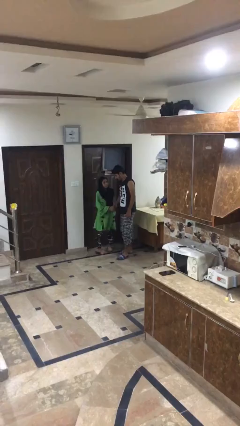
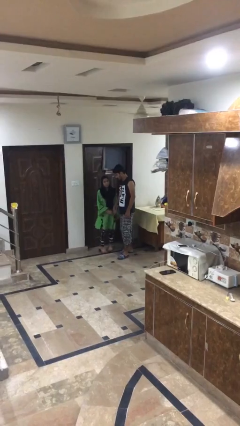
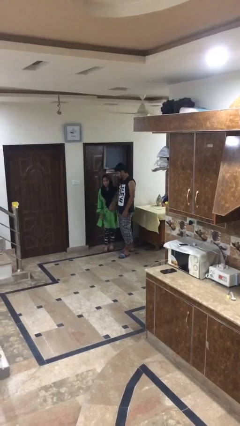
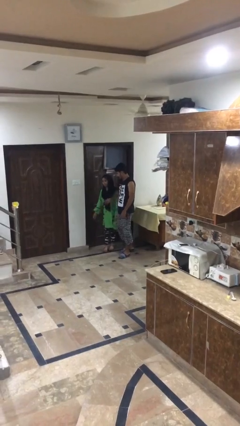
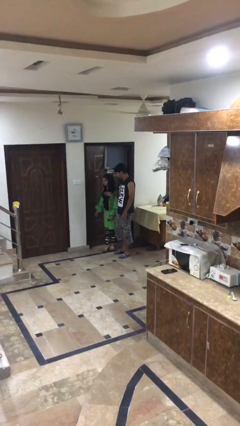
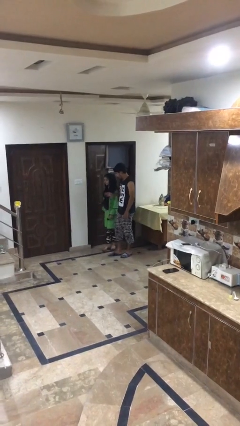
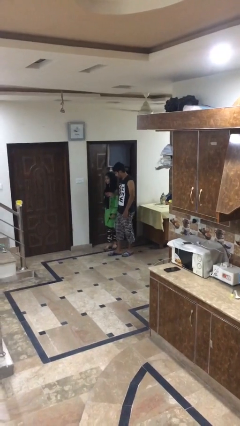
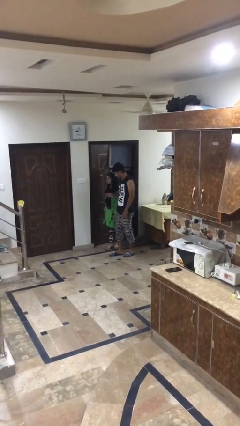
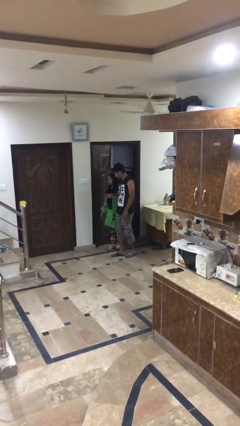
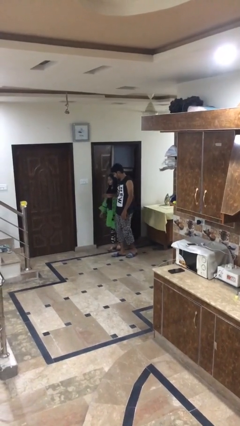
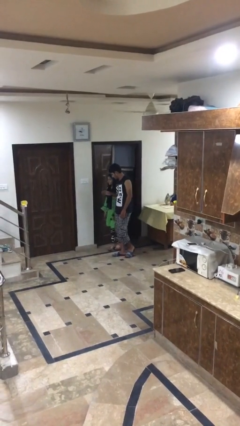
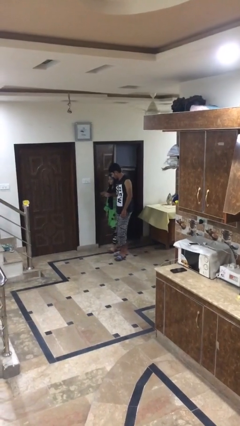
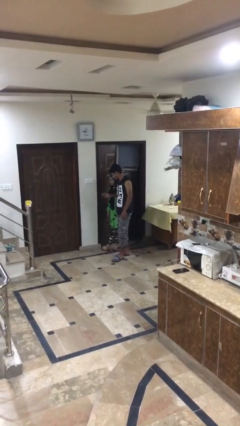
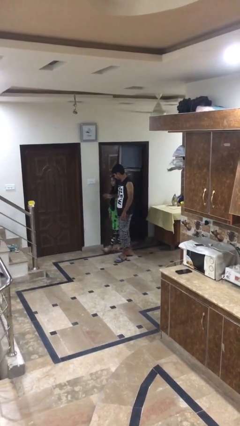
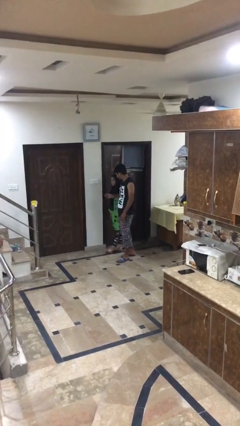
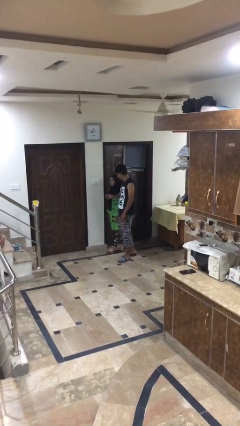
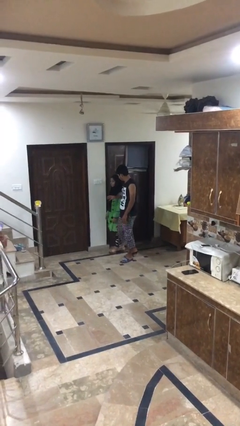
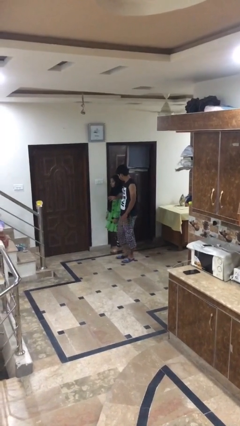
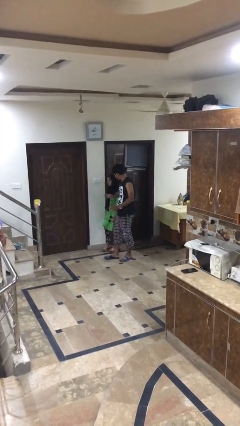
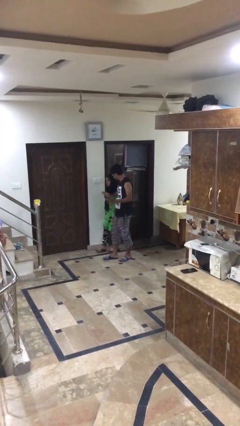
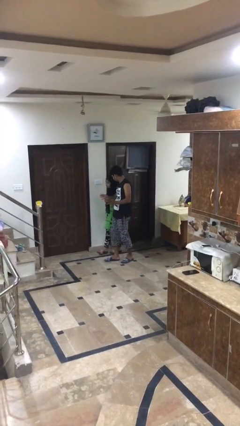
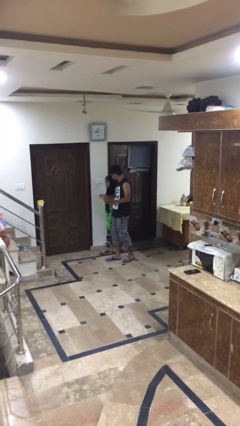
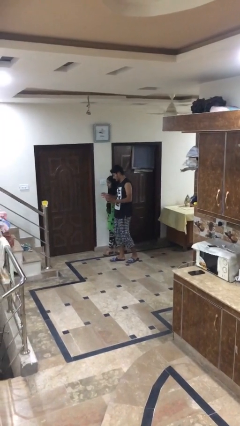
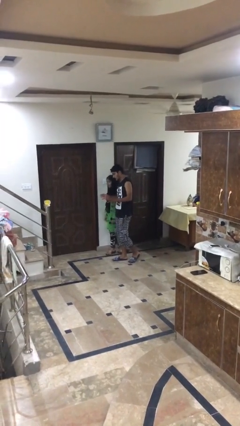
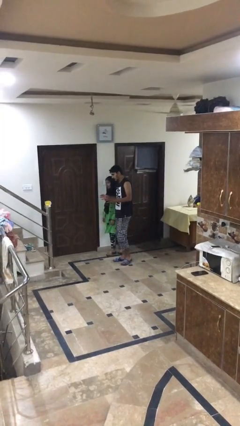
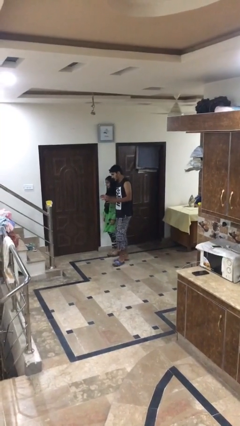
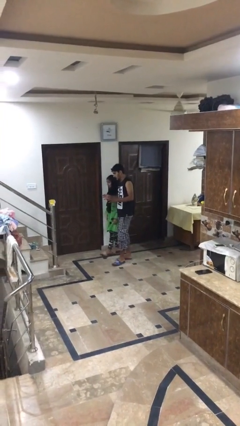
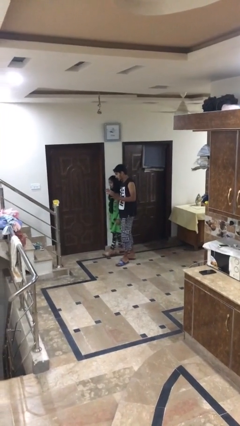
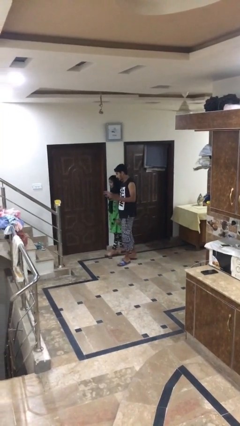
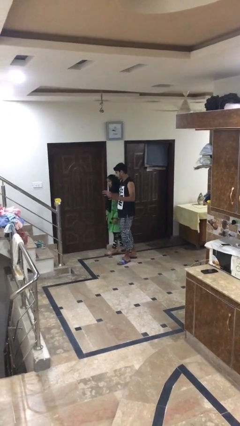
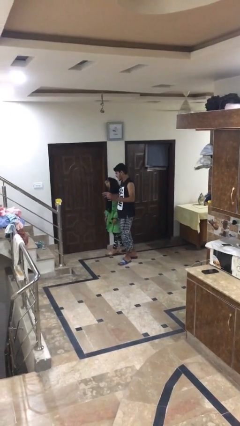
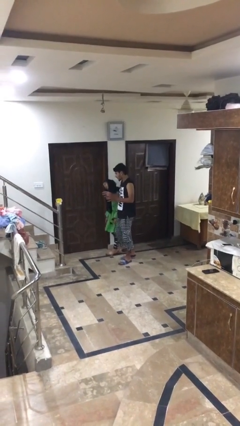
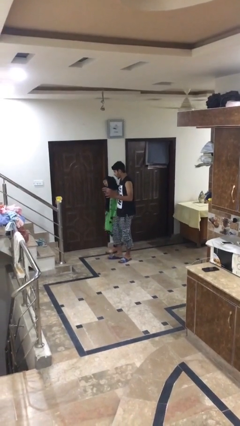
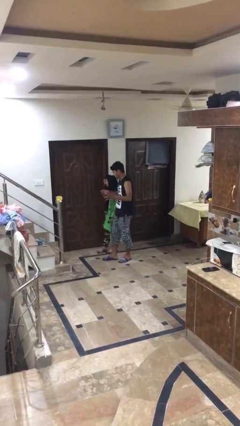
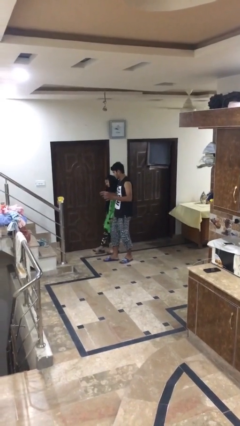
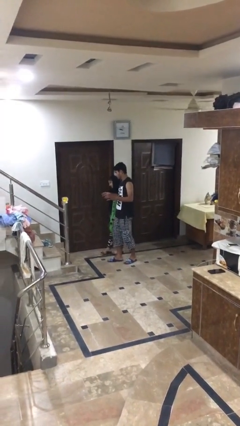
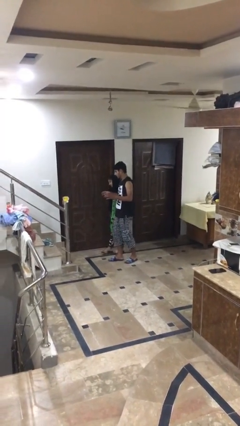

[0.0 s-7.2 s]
person talks to person

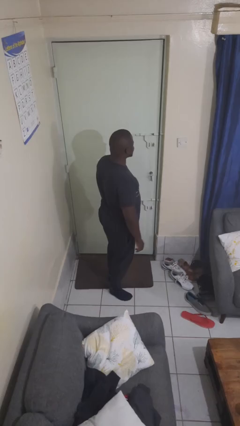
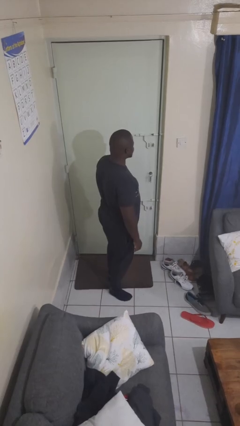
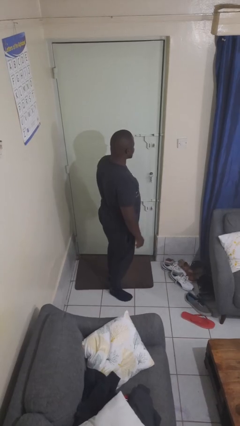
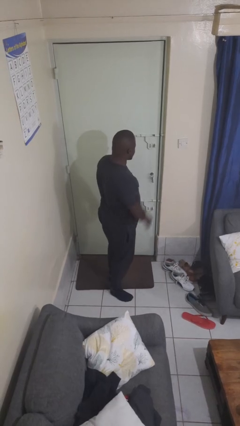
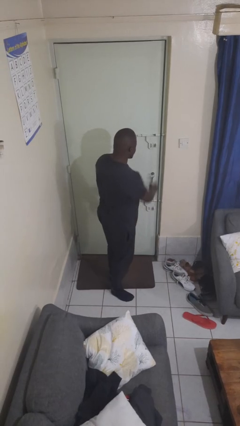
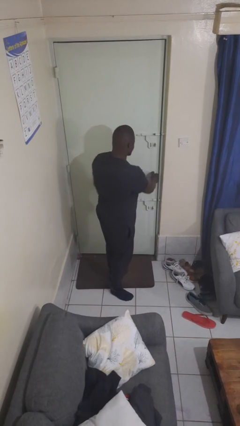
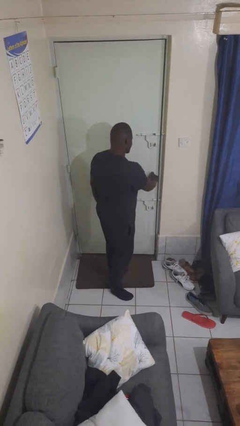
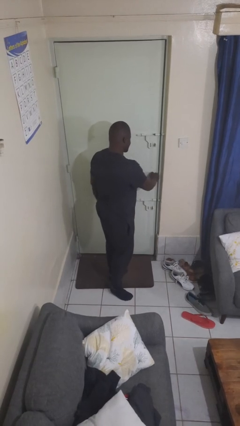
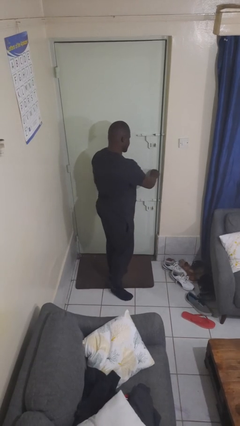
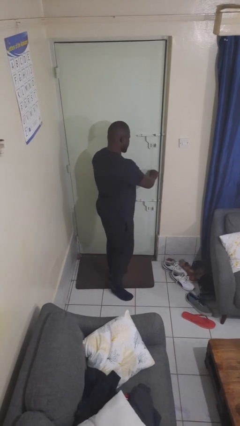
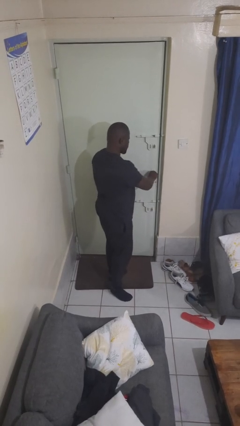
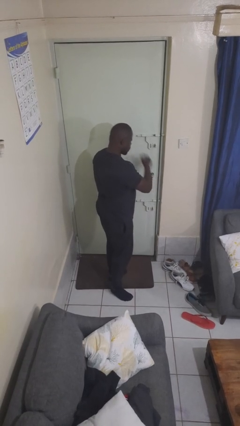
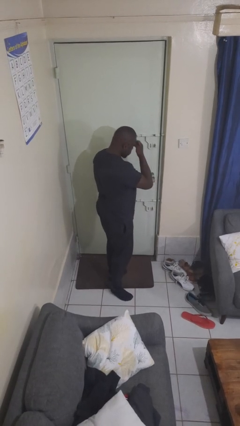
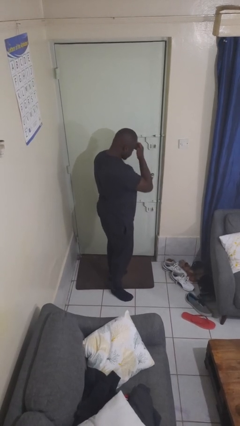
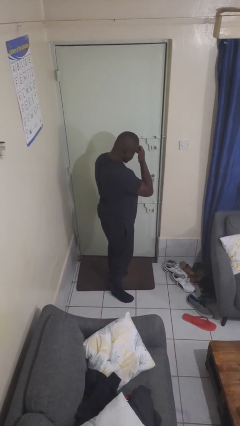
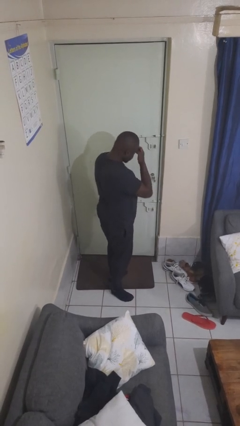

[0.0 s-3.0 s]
person unlocks door with keys

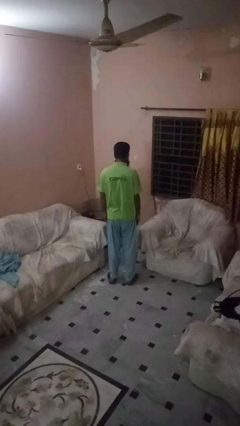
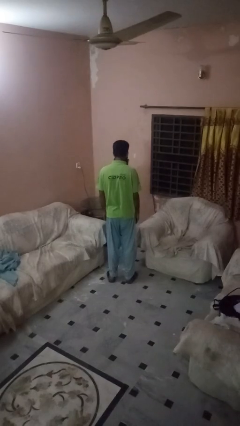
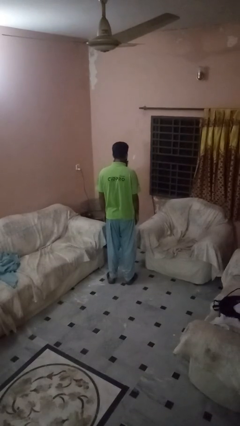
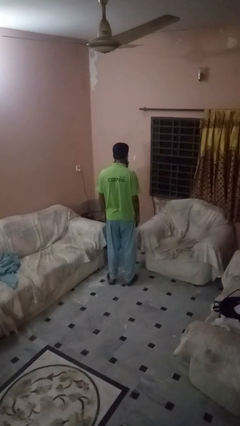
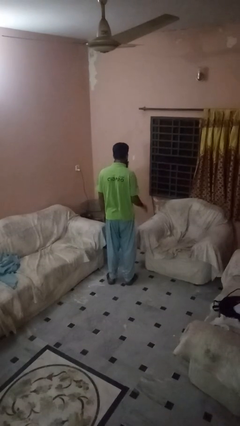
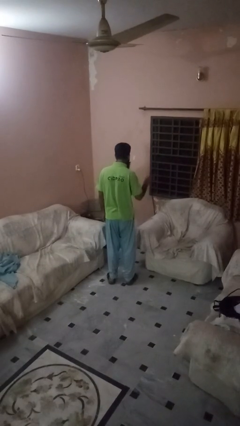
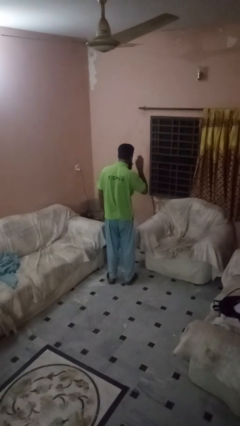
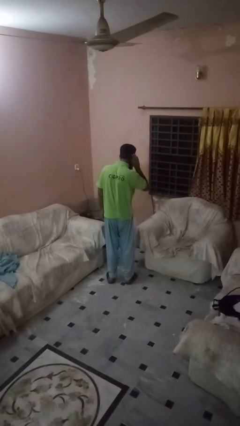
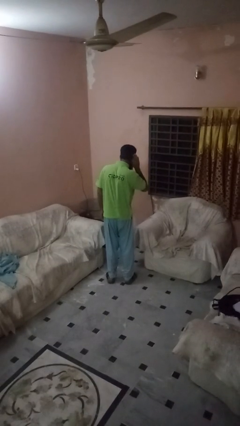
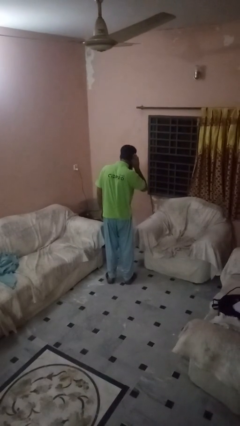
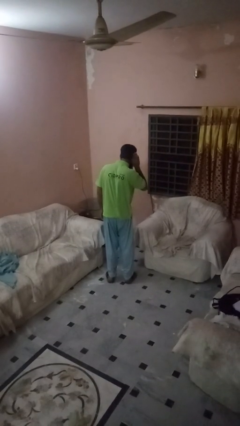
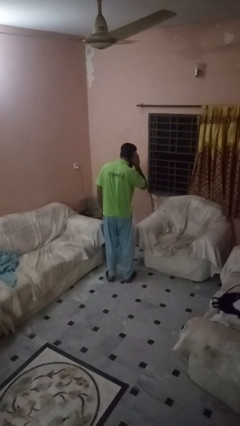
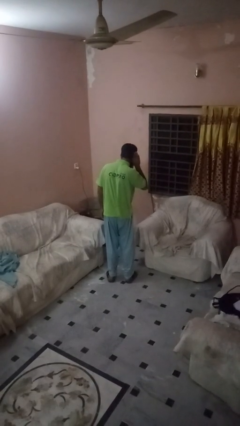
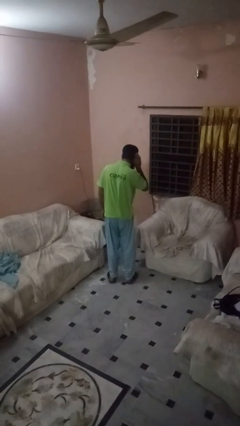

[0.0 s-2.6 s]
person gestures listen closely

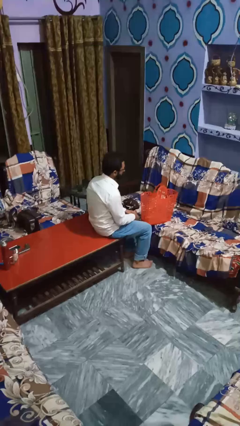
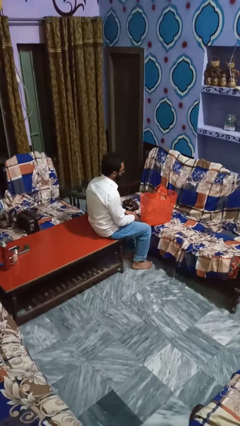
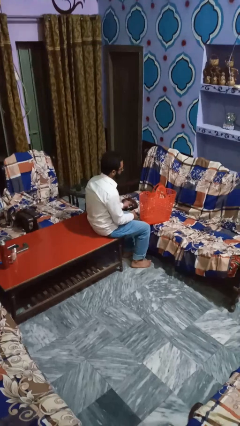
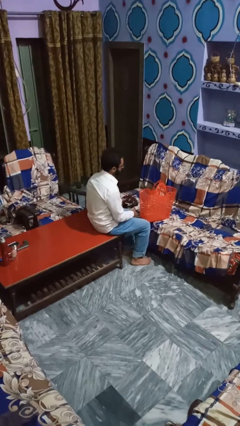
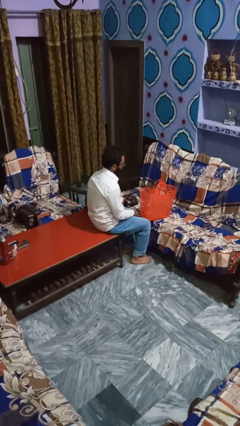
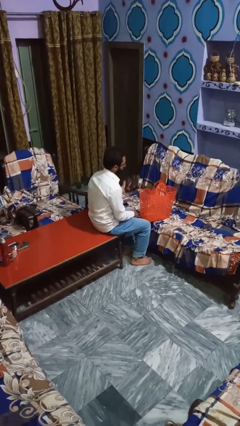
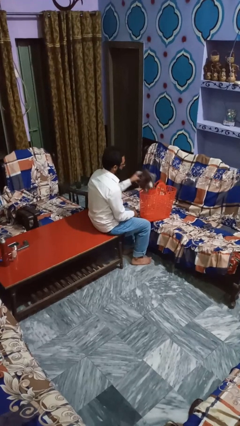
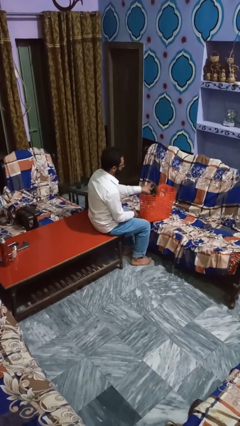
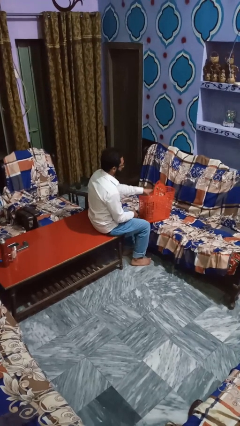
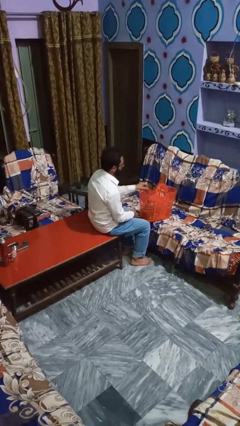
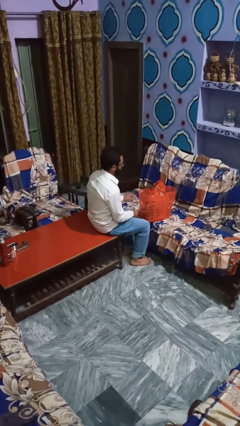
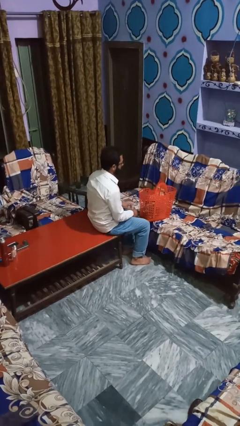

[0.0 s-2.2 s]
person discards trash

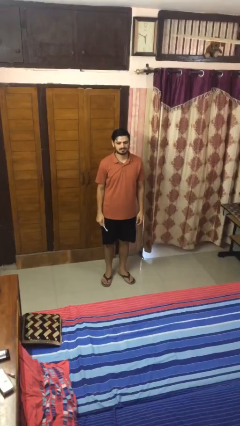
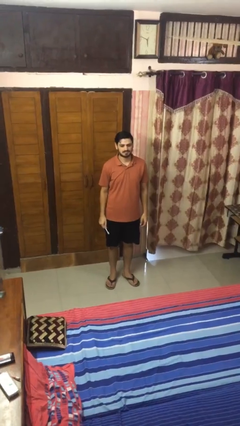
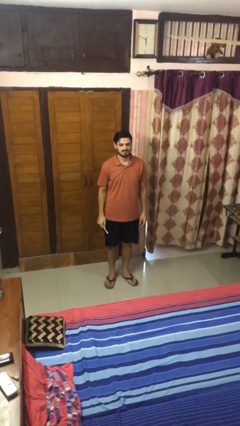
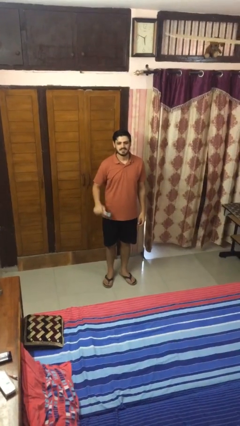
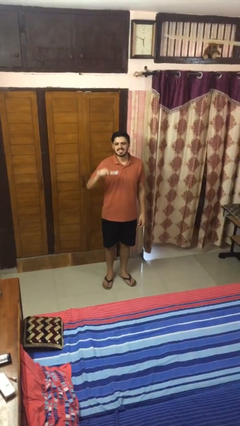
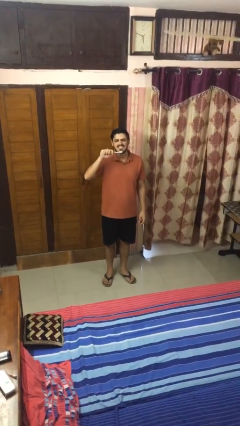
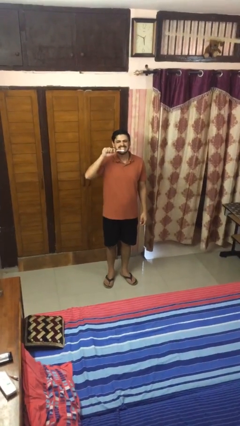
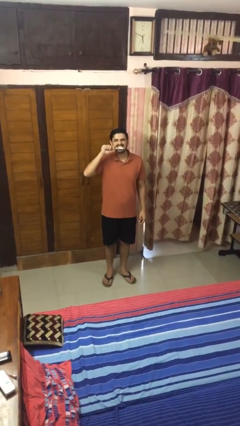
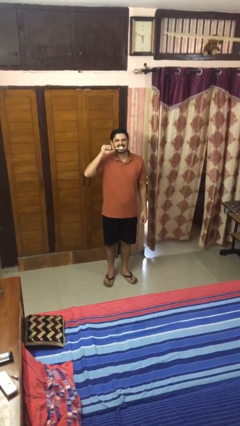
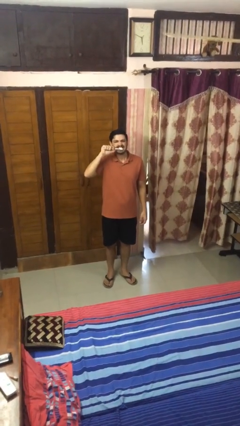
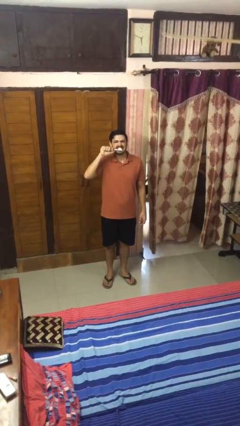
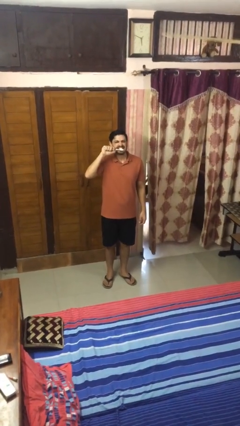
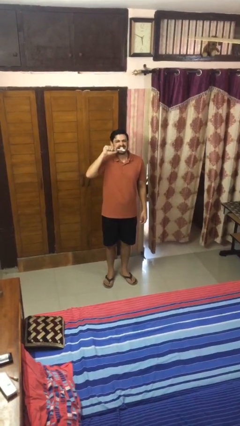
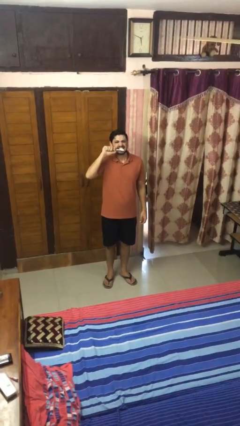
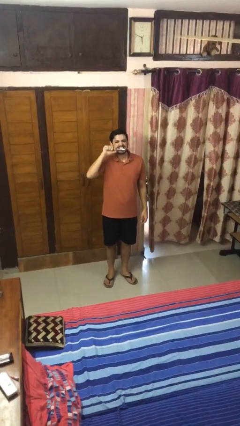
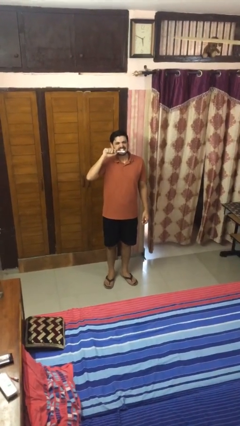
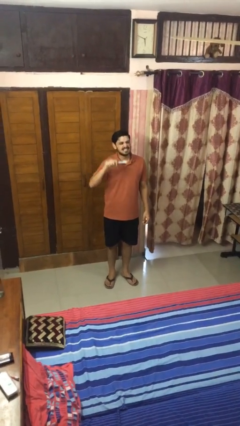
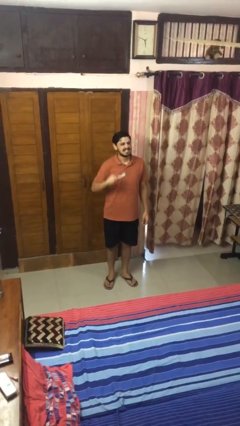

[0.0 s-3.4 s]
person brushes teeth
